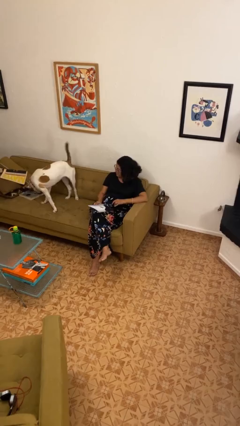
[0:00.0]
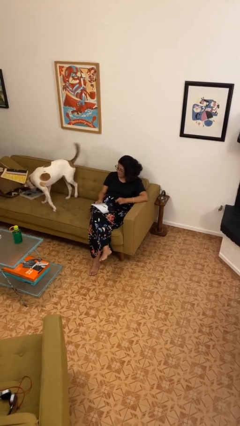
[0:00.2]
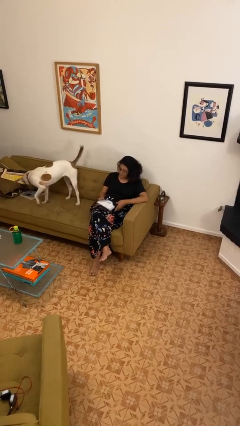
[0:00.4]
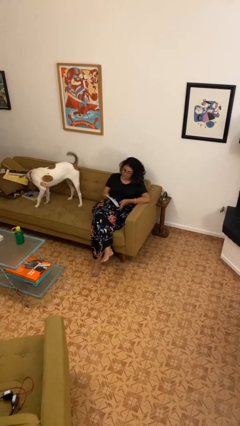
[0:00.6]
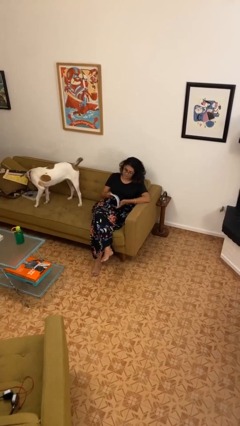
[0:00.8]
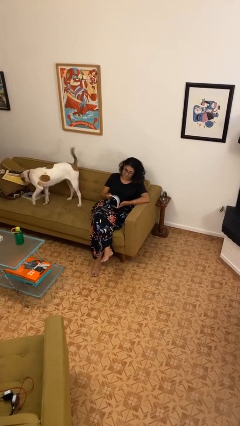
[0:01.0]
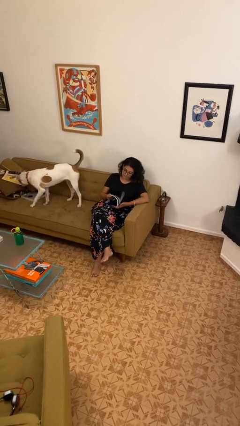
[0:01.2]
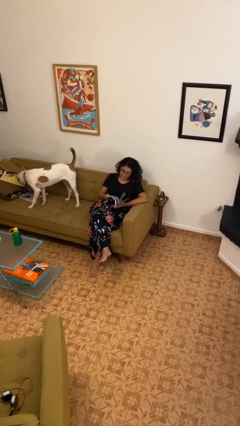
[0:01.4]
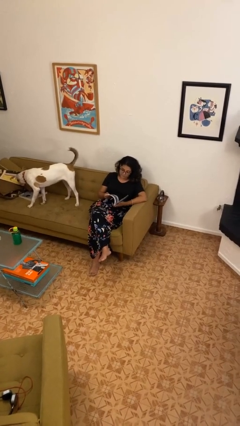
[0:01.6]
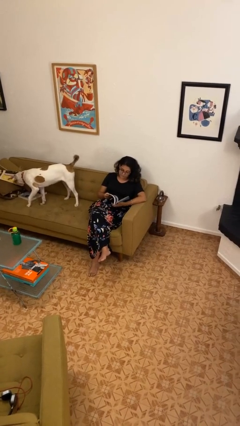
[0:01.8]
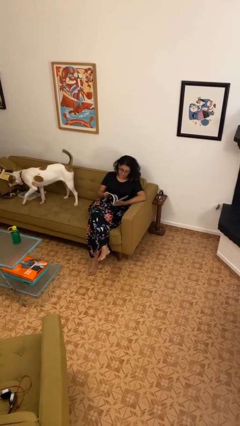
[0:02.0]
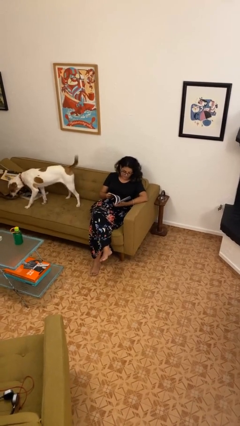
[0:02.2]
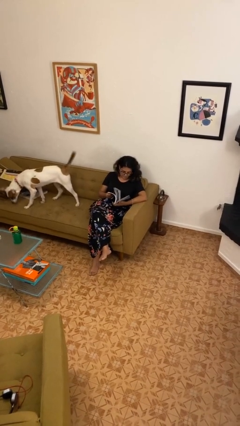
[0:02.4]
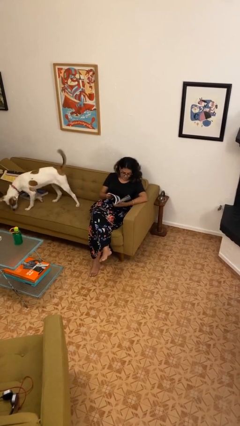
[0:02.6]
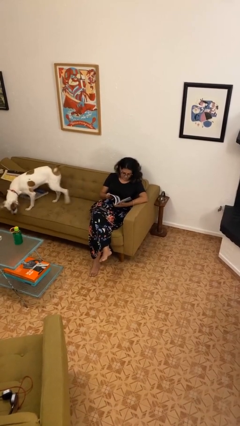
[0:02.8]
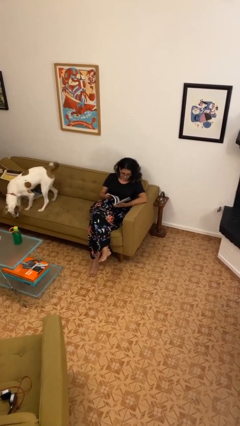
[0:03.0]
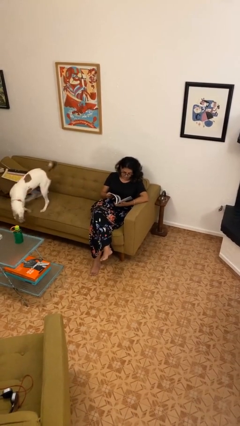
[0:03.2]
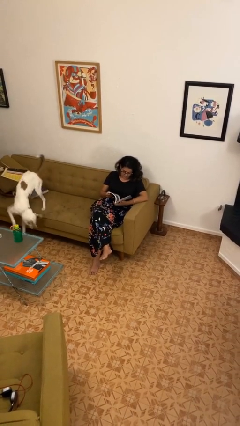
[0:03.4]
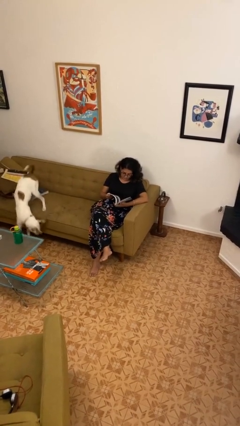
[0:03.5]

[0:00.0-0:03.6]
person reads magazine

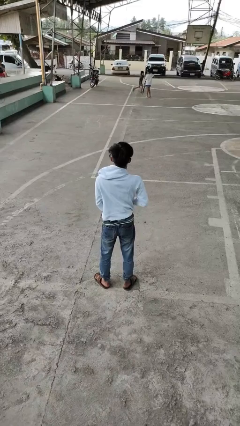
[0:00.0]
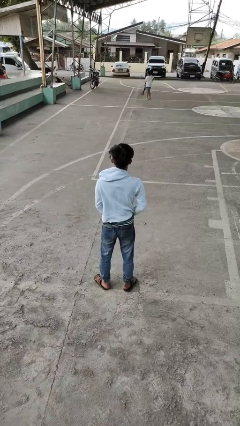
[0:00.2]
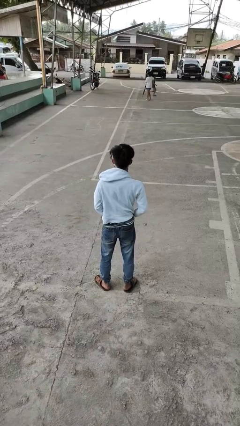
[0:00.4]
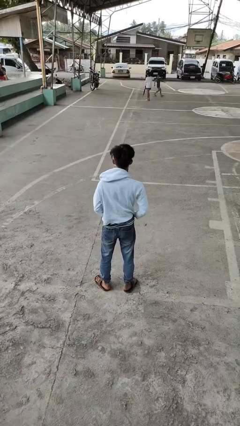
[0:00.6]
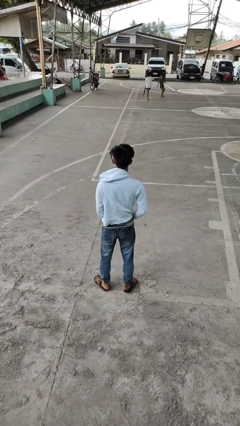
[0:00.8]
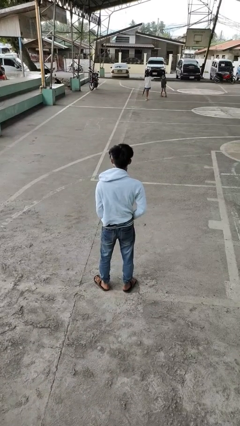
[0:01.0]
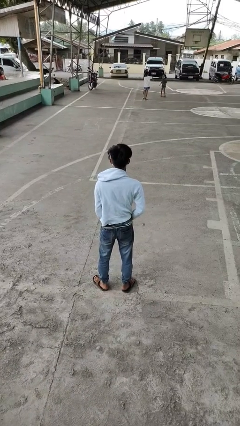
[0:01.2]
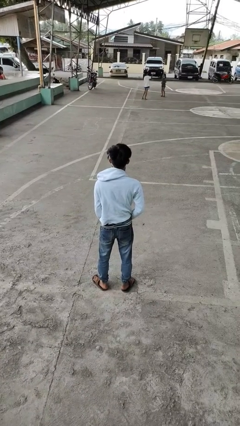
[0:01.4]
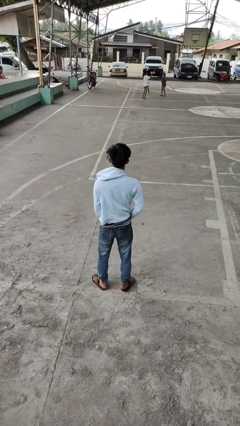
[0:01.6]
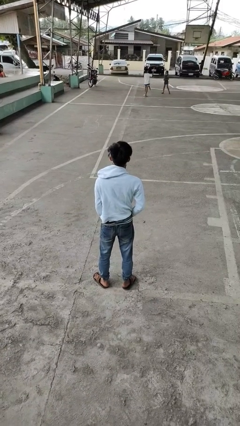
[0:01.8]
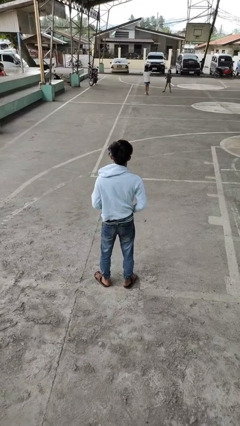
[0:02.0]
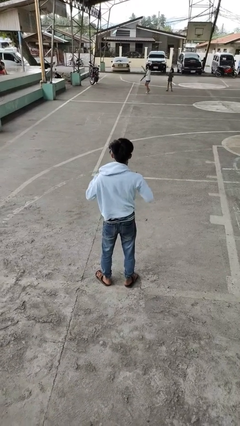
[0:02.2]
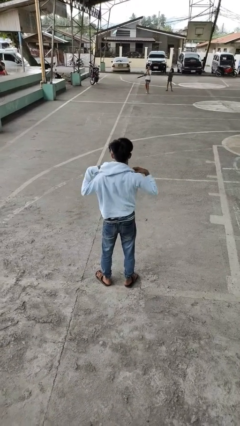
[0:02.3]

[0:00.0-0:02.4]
person unzips jacket

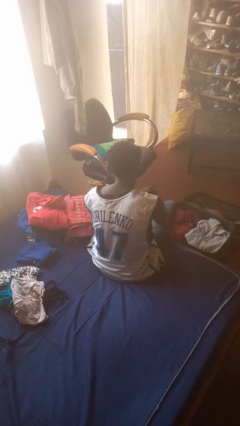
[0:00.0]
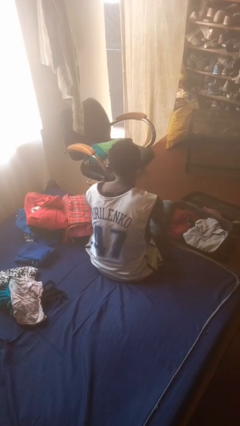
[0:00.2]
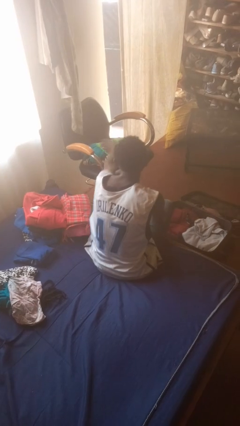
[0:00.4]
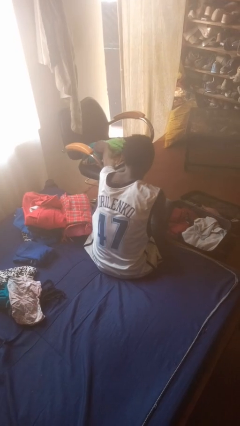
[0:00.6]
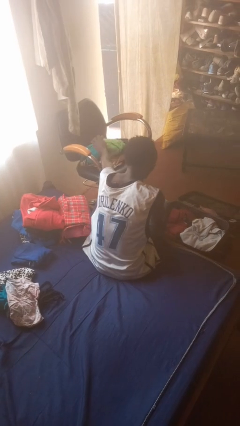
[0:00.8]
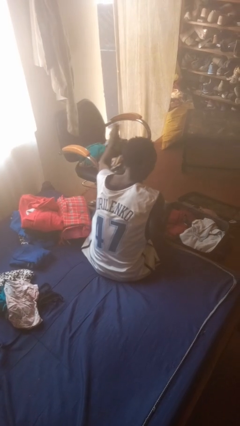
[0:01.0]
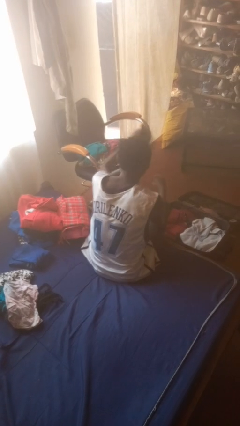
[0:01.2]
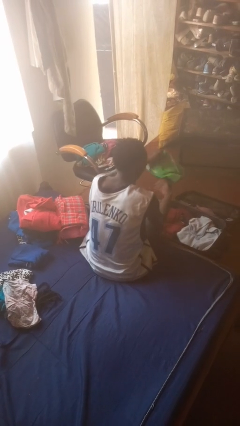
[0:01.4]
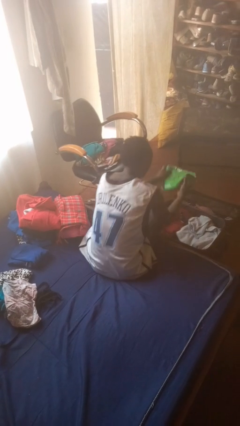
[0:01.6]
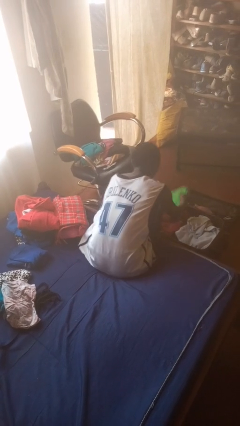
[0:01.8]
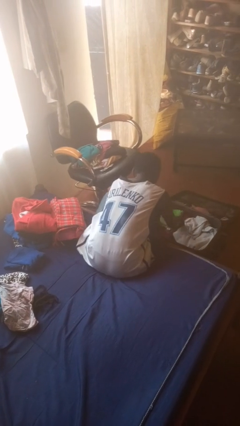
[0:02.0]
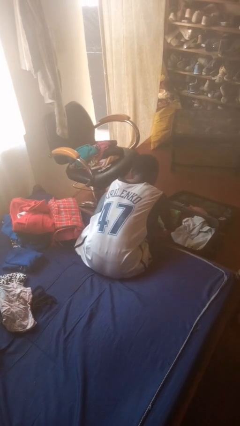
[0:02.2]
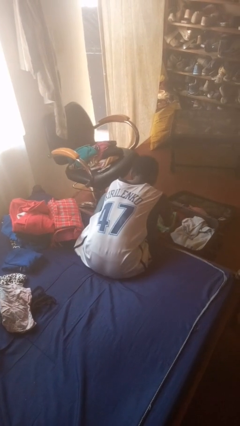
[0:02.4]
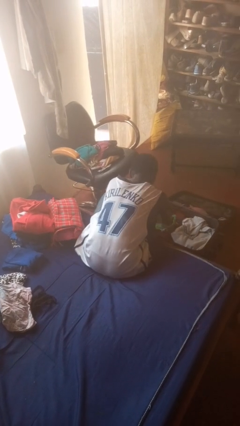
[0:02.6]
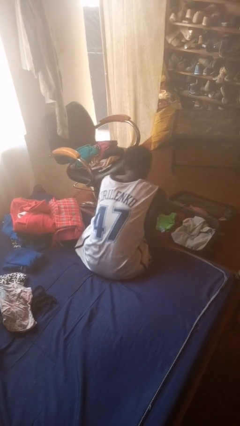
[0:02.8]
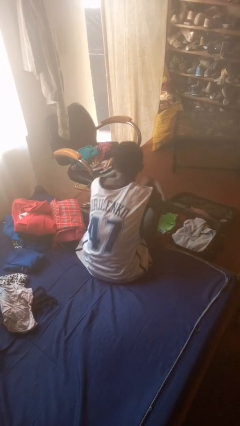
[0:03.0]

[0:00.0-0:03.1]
person loads clothes into suitcase

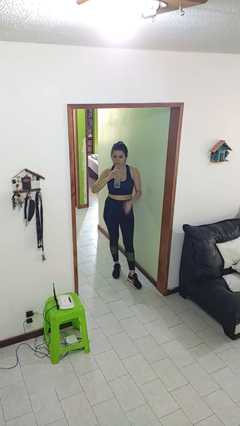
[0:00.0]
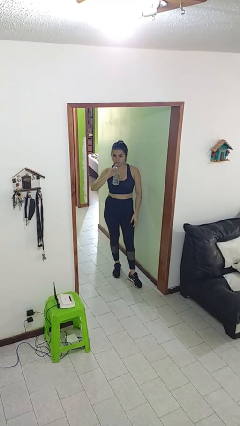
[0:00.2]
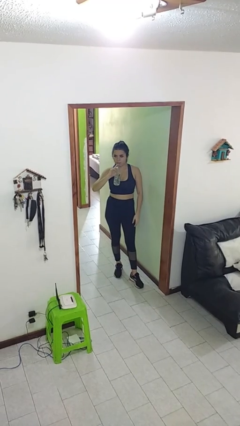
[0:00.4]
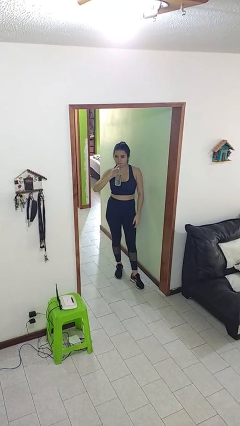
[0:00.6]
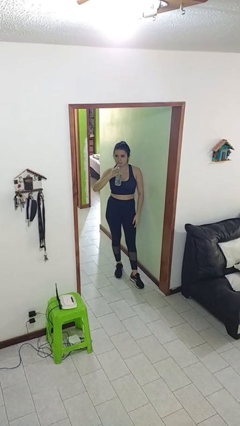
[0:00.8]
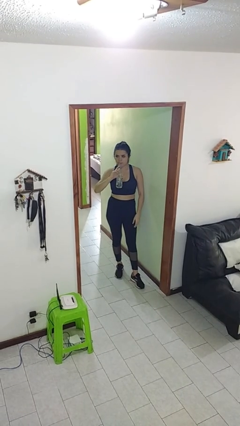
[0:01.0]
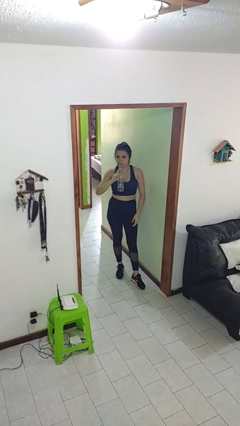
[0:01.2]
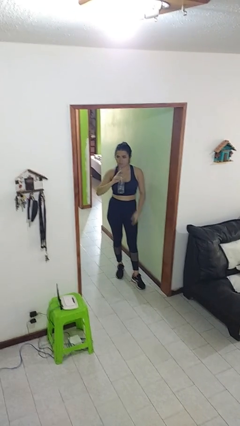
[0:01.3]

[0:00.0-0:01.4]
person drinks from straw

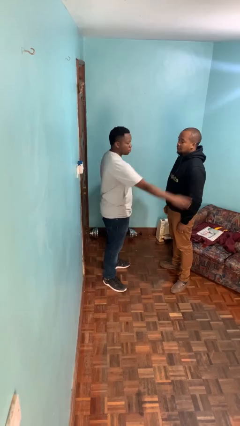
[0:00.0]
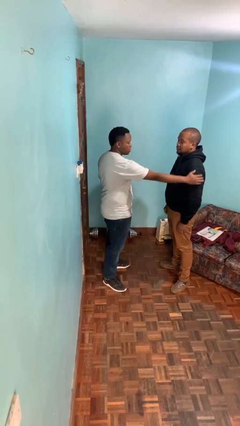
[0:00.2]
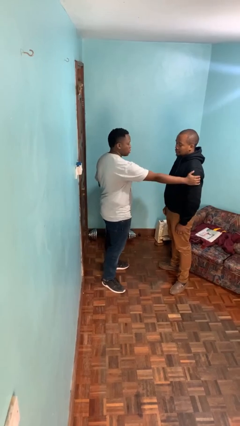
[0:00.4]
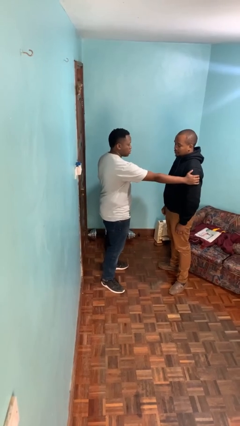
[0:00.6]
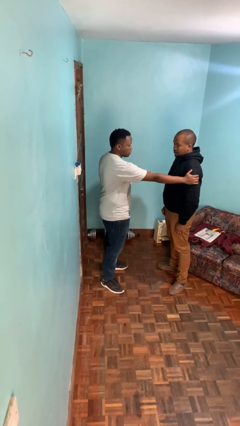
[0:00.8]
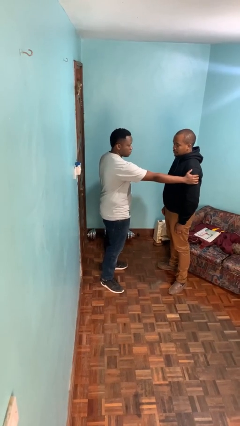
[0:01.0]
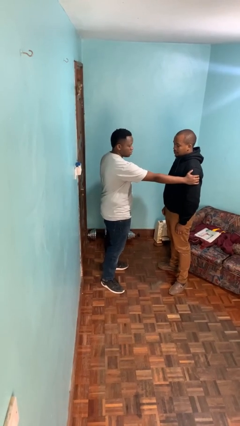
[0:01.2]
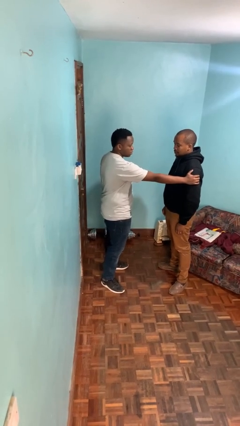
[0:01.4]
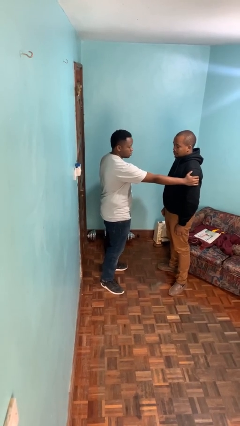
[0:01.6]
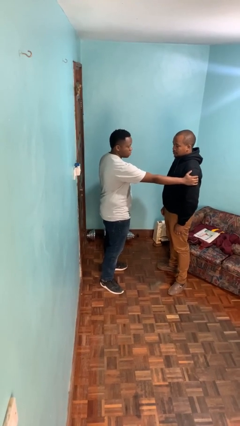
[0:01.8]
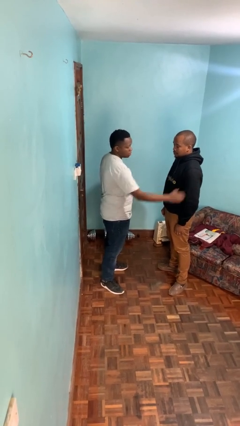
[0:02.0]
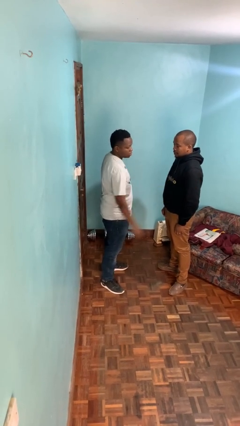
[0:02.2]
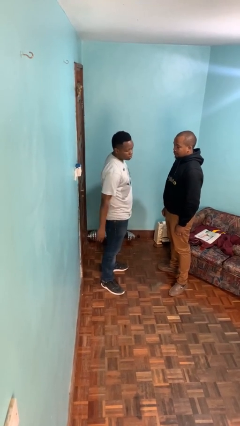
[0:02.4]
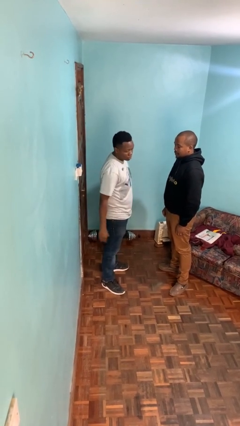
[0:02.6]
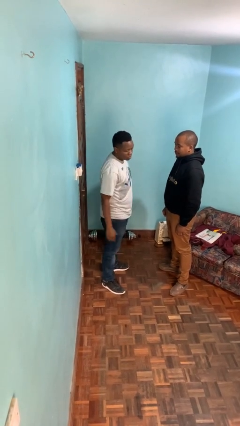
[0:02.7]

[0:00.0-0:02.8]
person grabs person by bicep

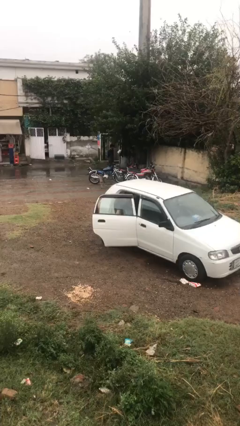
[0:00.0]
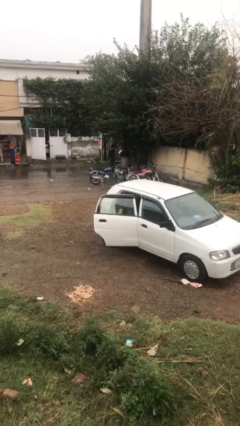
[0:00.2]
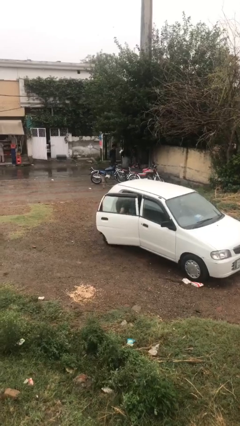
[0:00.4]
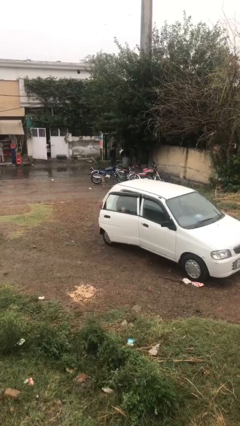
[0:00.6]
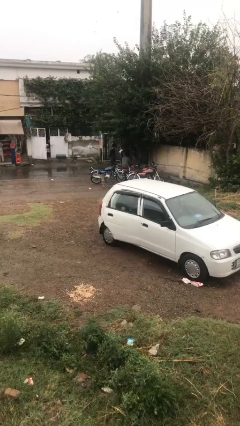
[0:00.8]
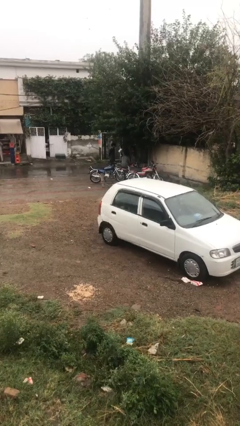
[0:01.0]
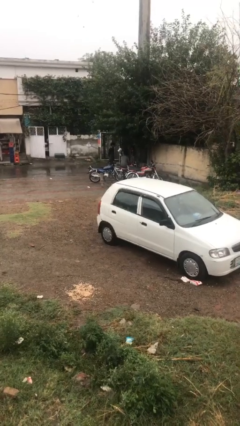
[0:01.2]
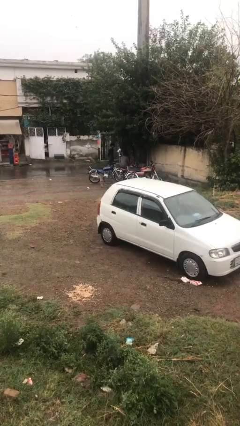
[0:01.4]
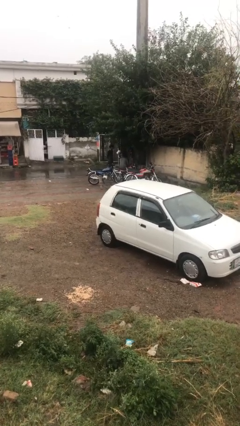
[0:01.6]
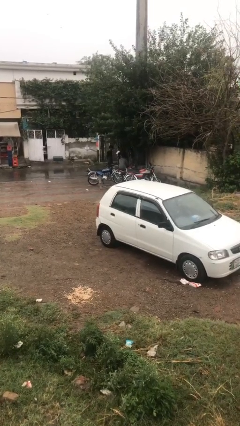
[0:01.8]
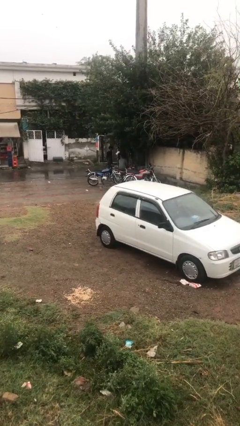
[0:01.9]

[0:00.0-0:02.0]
person closes car door

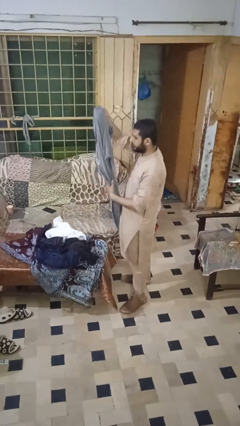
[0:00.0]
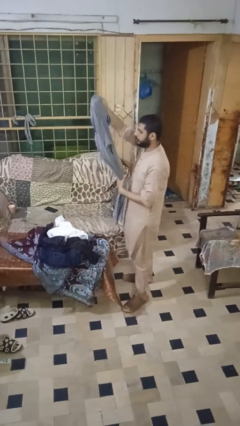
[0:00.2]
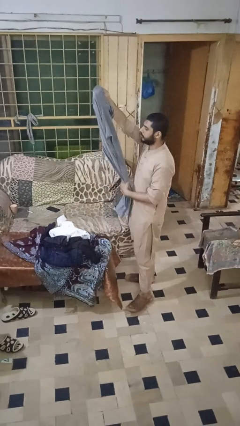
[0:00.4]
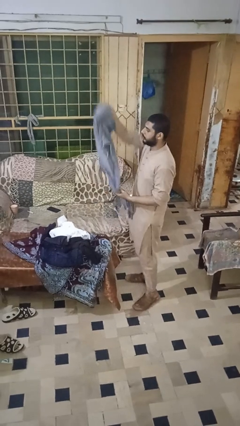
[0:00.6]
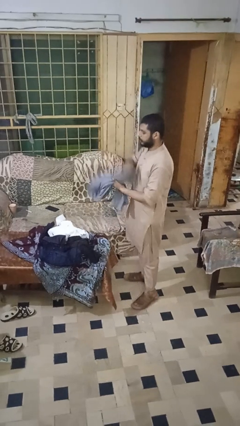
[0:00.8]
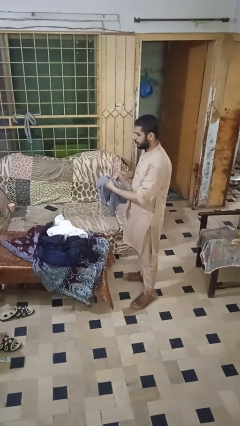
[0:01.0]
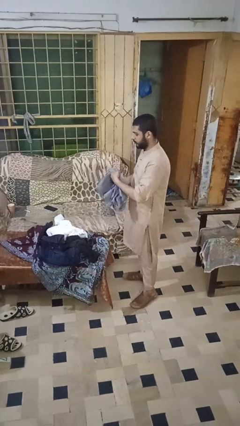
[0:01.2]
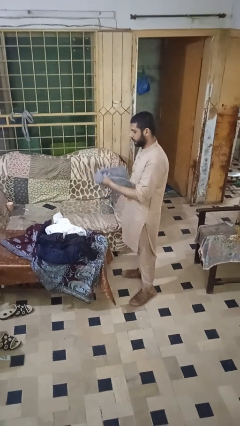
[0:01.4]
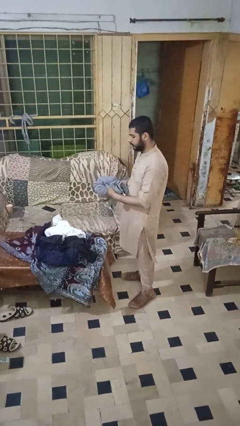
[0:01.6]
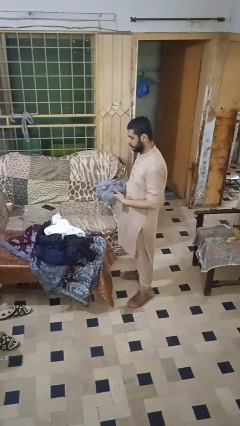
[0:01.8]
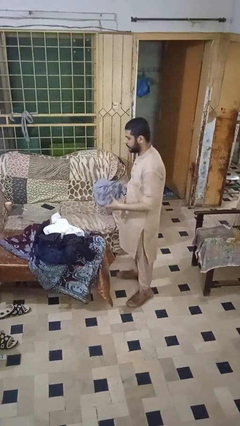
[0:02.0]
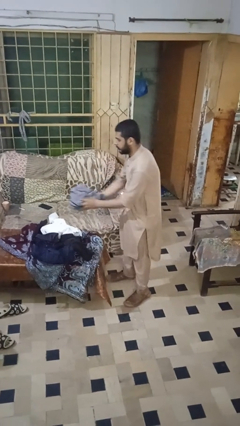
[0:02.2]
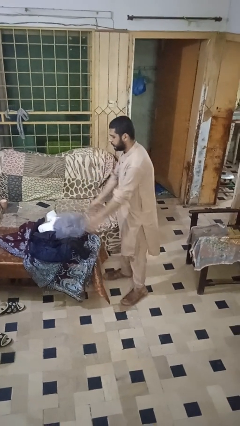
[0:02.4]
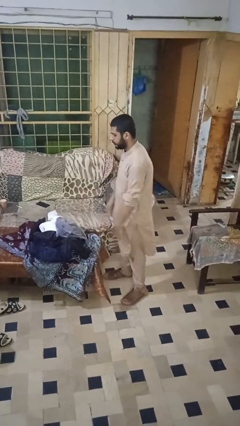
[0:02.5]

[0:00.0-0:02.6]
person folds pants
